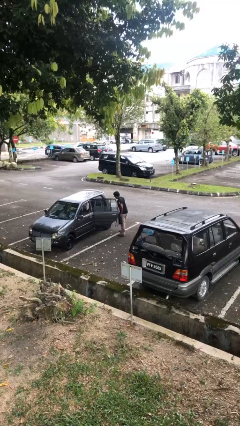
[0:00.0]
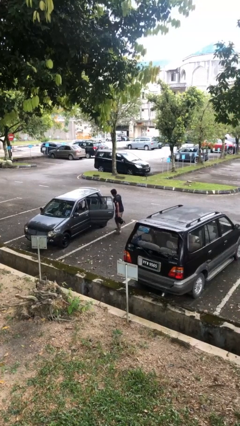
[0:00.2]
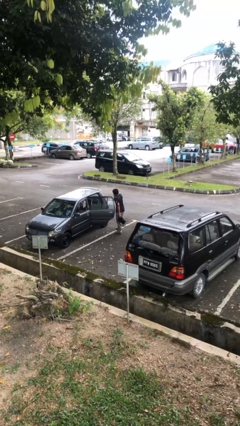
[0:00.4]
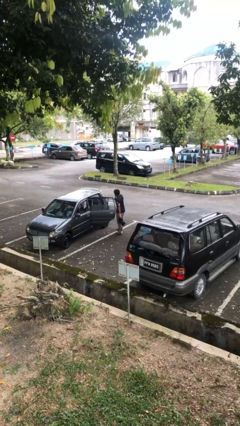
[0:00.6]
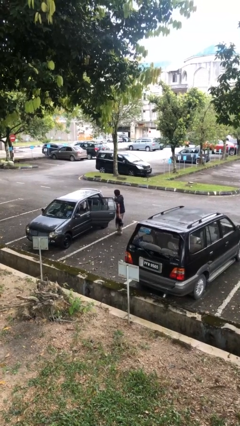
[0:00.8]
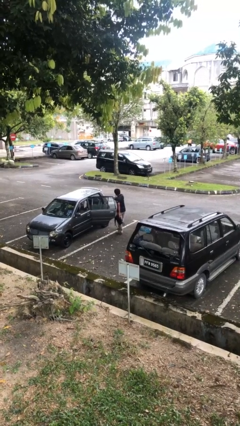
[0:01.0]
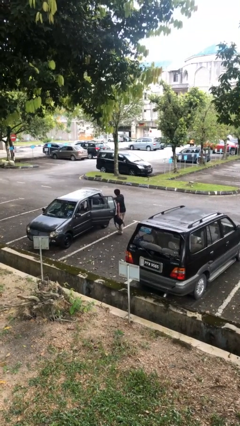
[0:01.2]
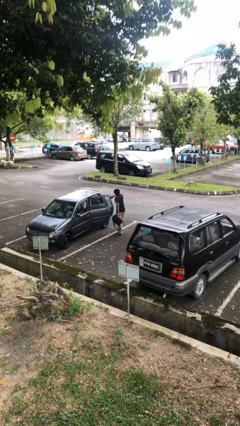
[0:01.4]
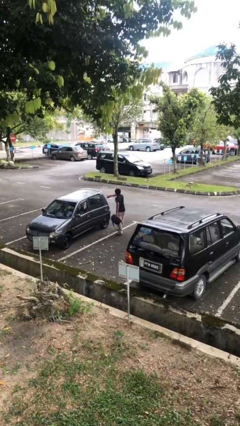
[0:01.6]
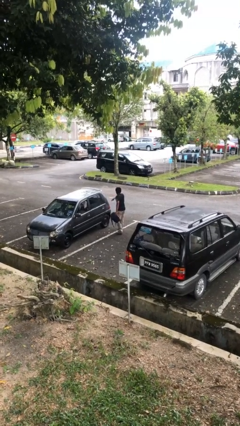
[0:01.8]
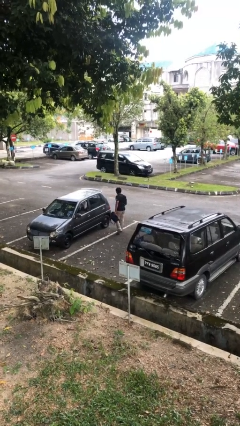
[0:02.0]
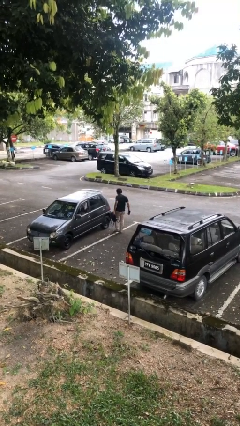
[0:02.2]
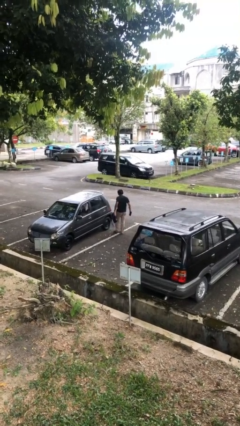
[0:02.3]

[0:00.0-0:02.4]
person closes car door

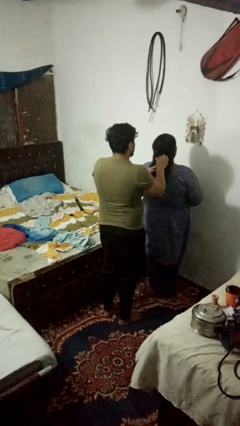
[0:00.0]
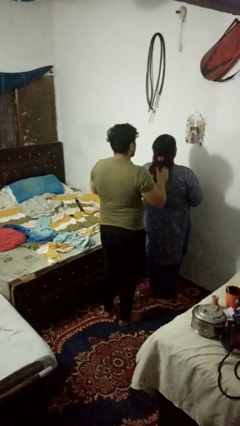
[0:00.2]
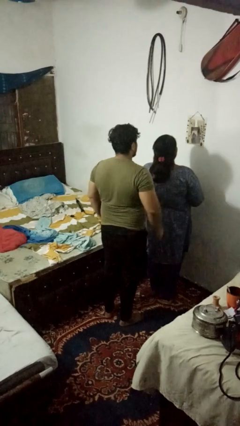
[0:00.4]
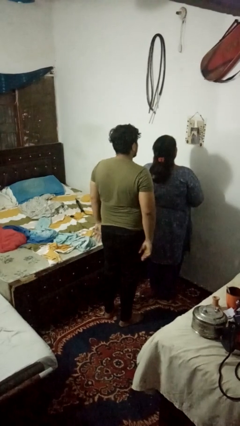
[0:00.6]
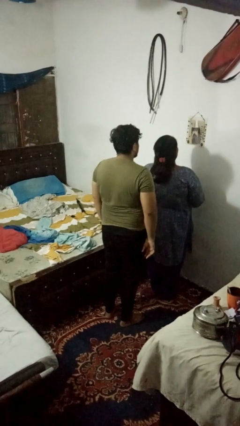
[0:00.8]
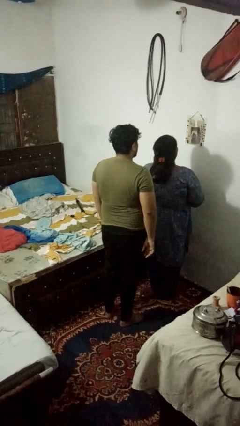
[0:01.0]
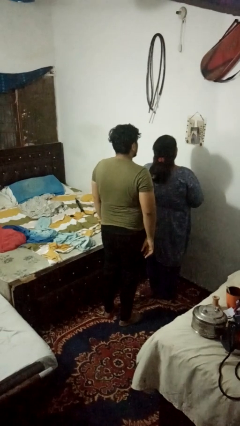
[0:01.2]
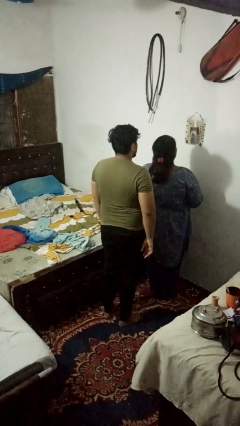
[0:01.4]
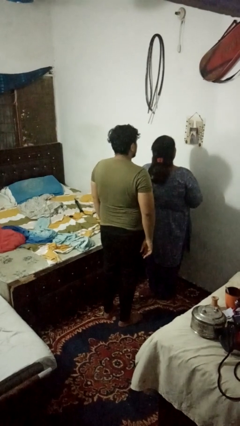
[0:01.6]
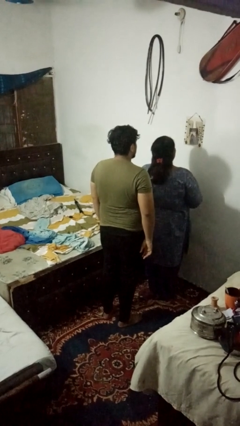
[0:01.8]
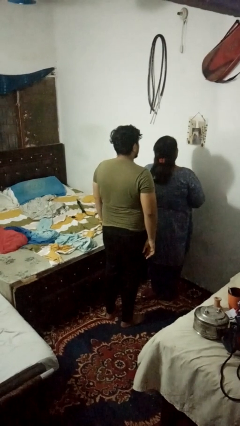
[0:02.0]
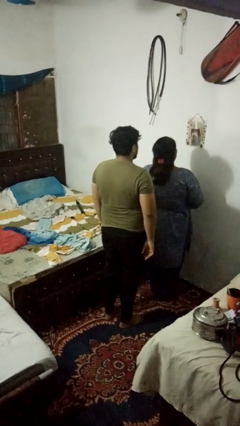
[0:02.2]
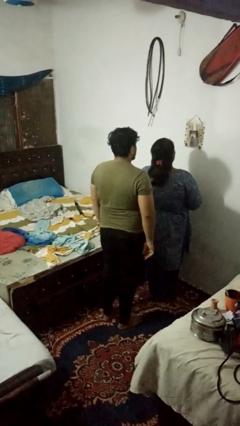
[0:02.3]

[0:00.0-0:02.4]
person braids hair of person

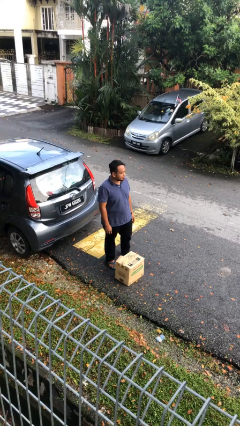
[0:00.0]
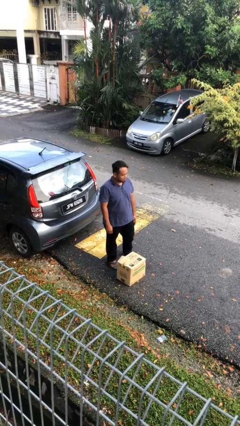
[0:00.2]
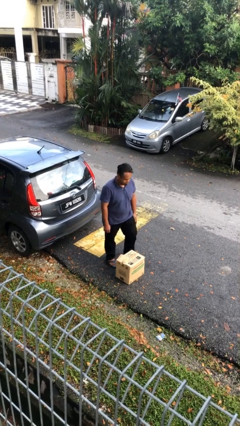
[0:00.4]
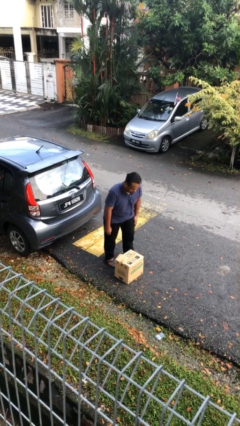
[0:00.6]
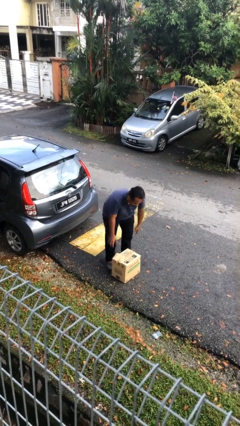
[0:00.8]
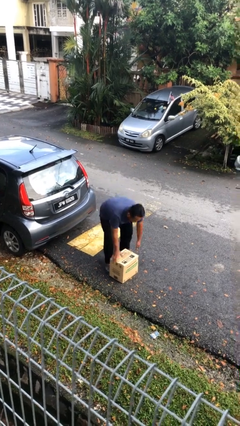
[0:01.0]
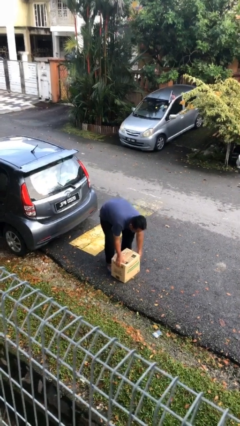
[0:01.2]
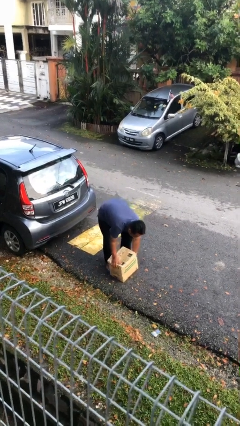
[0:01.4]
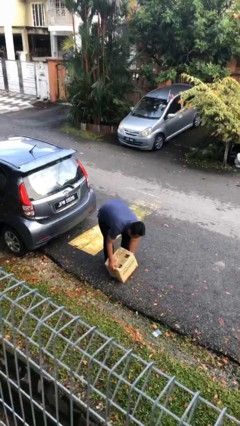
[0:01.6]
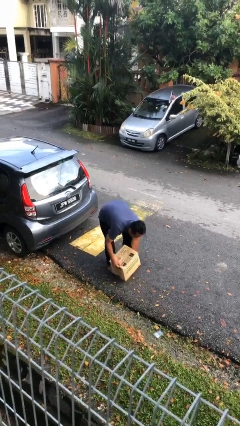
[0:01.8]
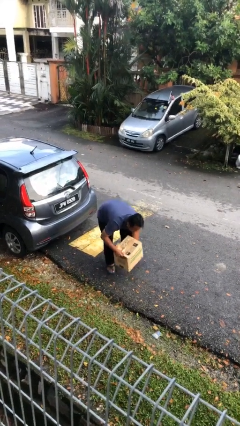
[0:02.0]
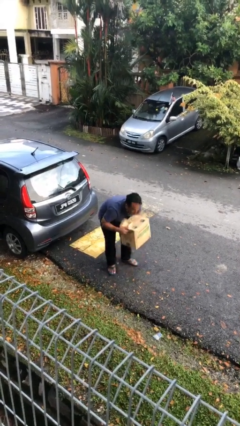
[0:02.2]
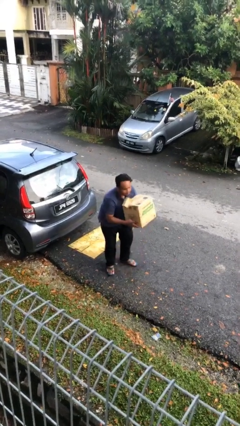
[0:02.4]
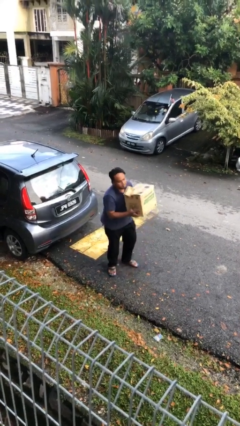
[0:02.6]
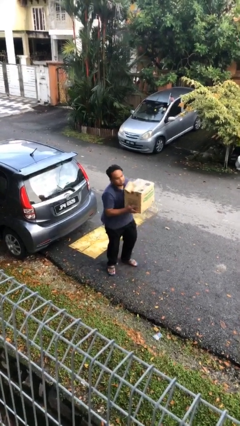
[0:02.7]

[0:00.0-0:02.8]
person picks up object from floor

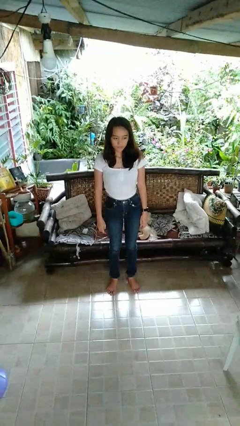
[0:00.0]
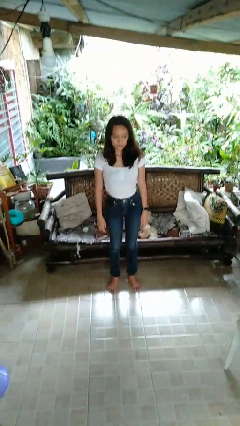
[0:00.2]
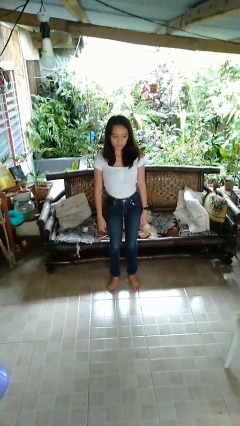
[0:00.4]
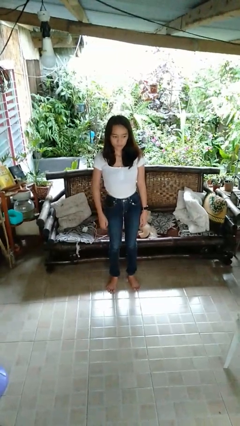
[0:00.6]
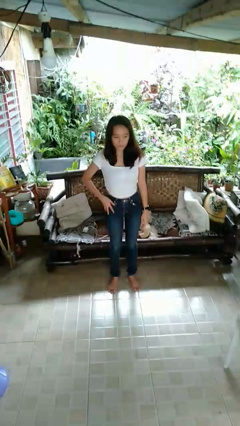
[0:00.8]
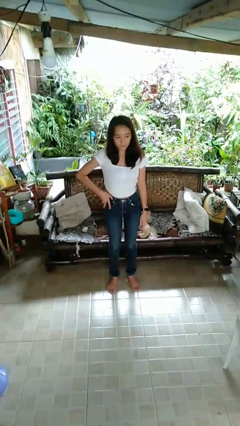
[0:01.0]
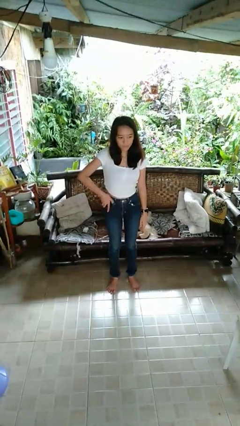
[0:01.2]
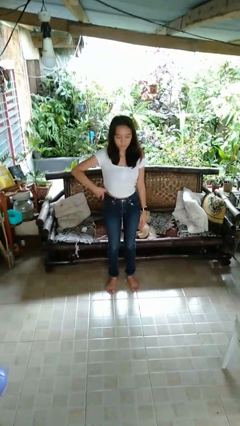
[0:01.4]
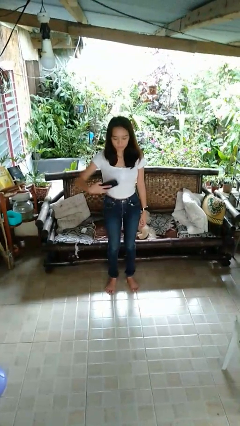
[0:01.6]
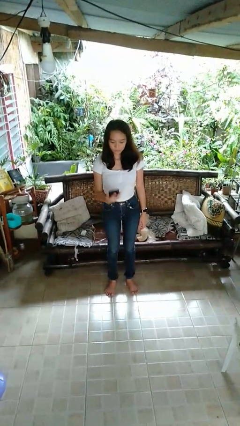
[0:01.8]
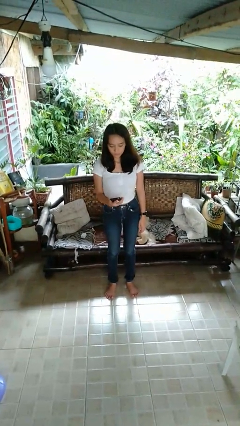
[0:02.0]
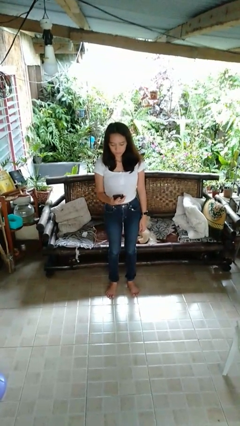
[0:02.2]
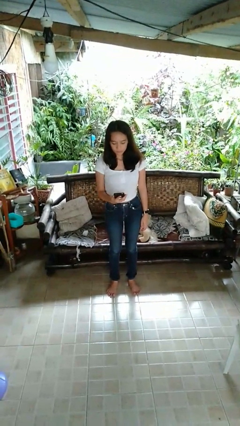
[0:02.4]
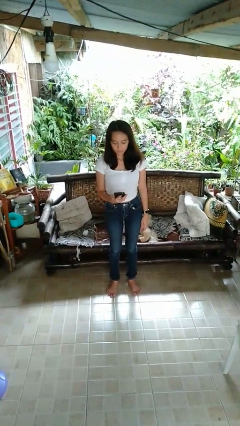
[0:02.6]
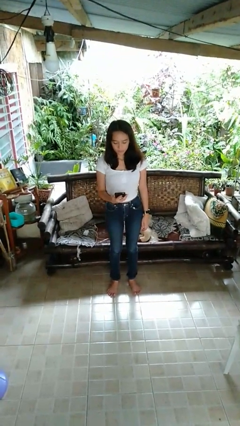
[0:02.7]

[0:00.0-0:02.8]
person takes phone from pocket

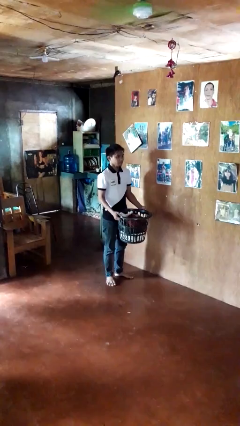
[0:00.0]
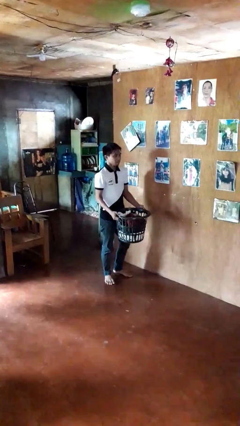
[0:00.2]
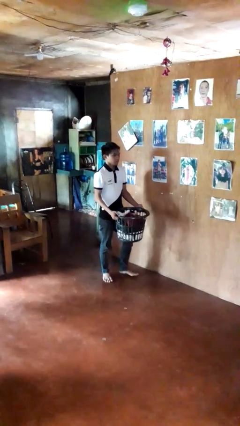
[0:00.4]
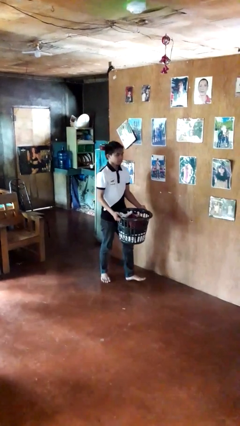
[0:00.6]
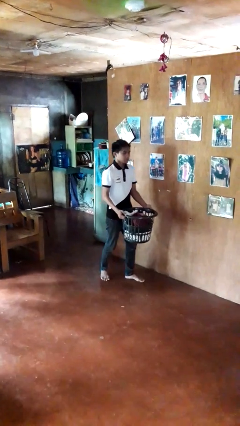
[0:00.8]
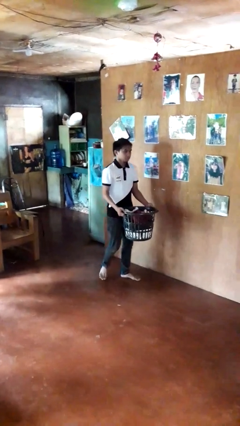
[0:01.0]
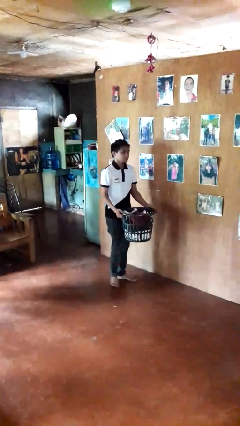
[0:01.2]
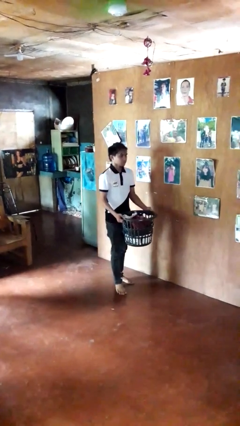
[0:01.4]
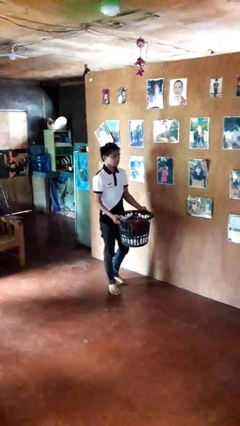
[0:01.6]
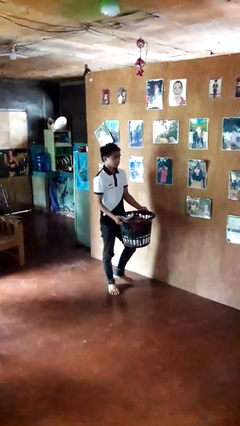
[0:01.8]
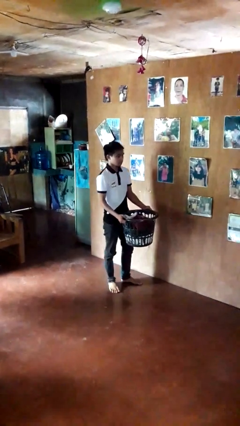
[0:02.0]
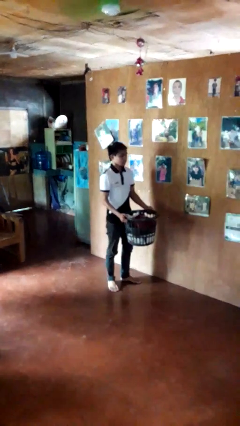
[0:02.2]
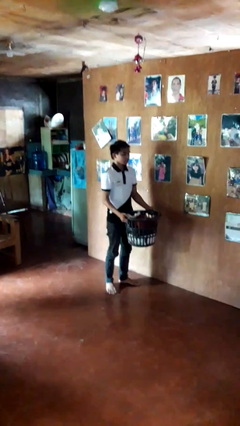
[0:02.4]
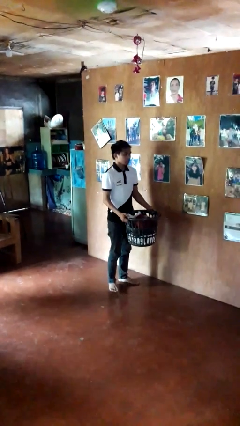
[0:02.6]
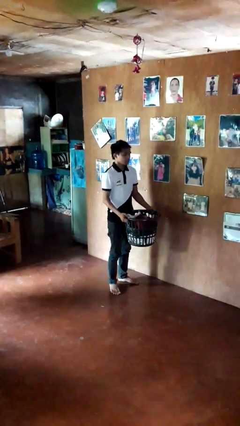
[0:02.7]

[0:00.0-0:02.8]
person carries laundry basket

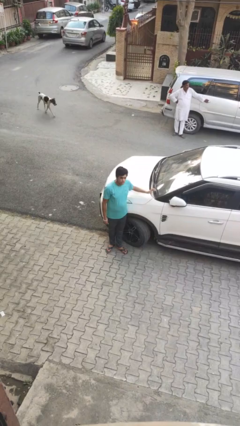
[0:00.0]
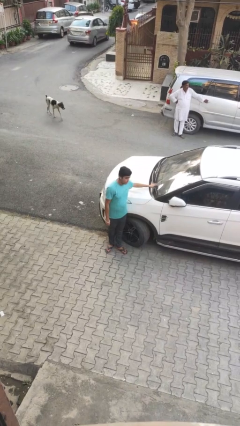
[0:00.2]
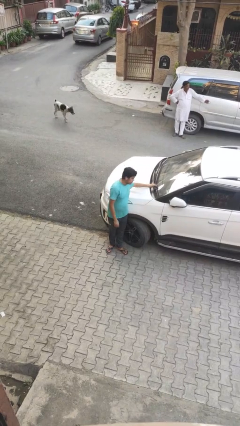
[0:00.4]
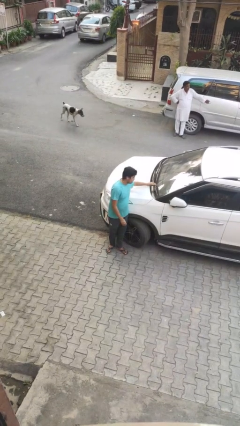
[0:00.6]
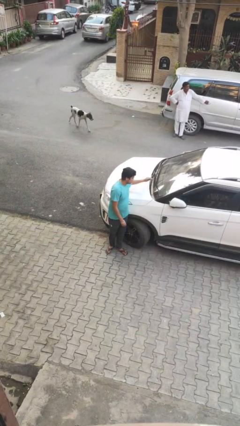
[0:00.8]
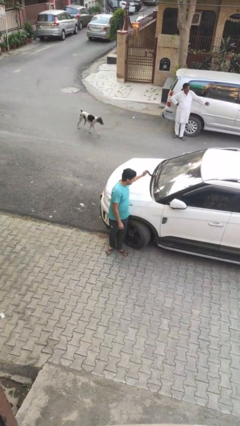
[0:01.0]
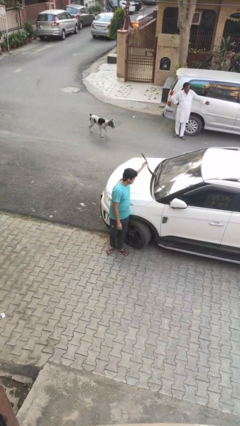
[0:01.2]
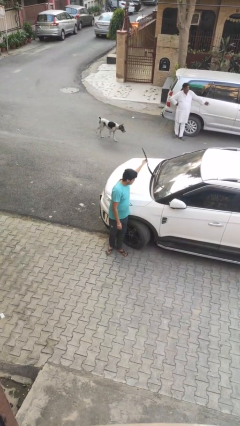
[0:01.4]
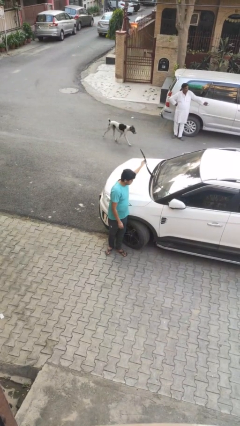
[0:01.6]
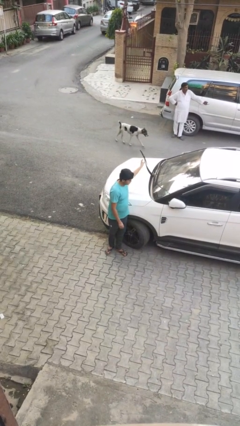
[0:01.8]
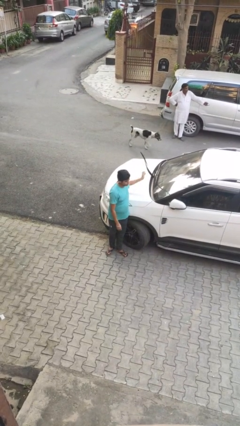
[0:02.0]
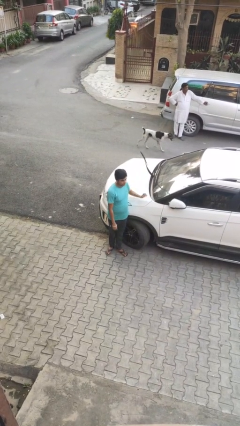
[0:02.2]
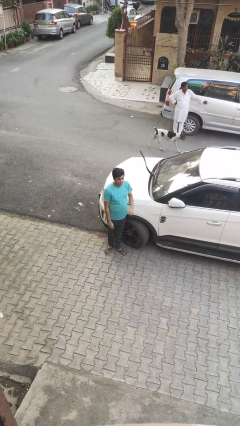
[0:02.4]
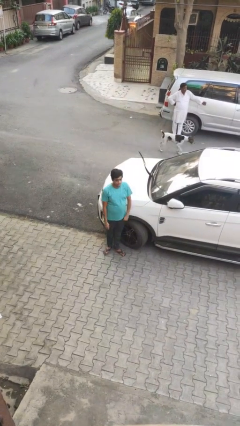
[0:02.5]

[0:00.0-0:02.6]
person flips up car wipers

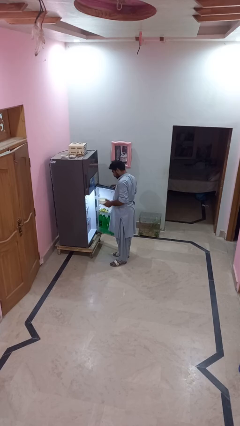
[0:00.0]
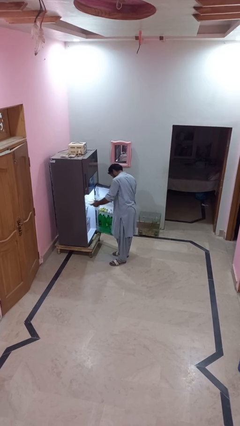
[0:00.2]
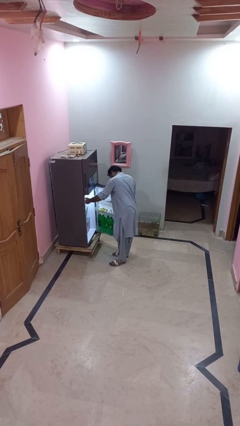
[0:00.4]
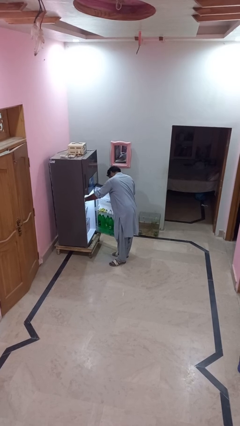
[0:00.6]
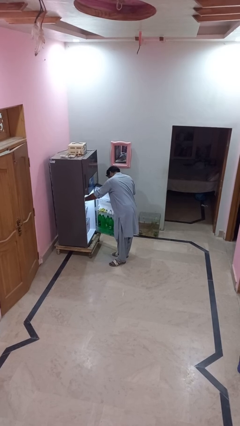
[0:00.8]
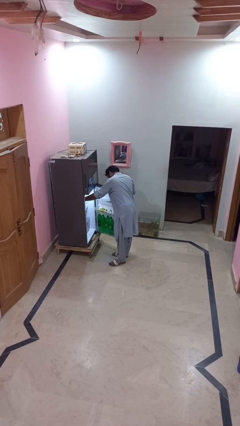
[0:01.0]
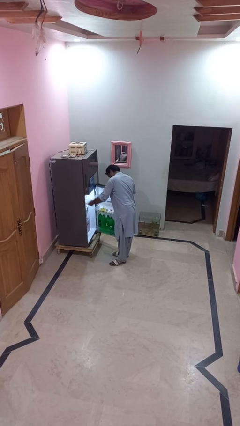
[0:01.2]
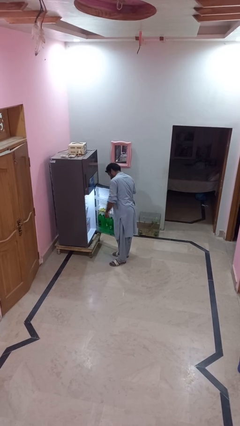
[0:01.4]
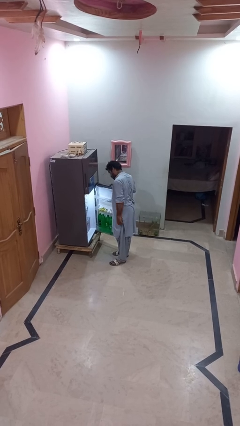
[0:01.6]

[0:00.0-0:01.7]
person puts object into refrigerator
